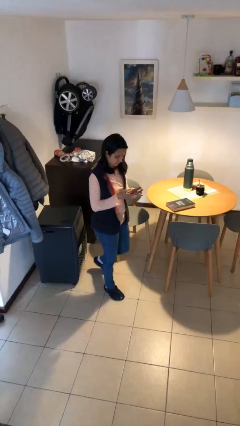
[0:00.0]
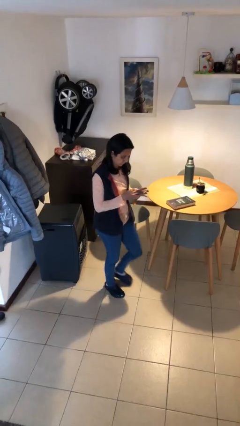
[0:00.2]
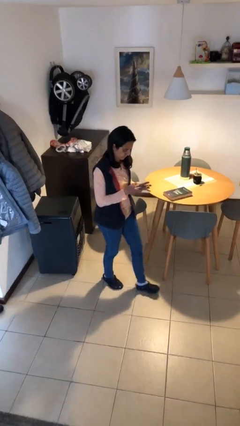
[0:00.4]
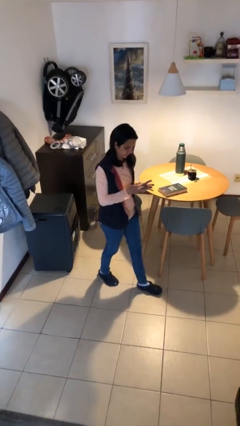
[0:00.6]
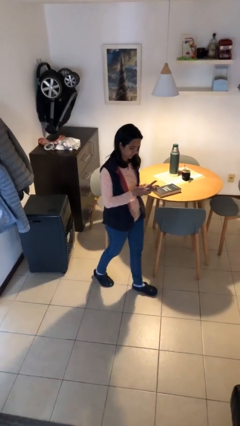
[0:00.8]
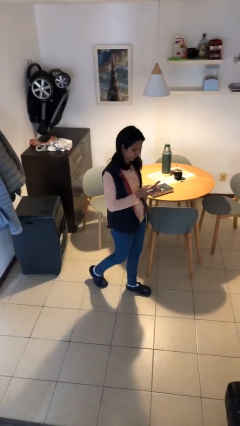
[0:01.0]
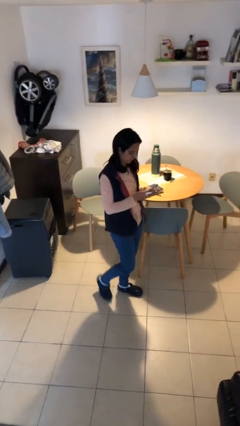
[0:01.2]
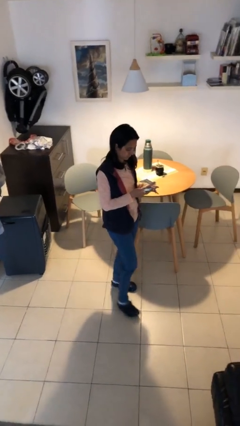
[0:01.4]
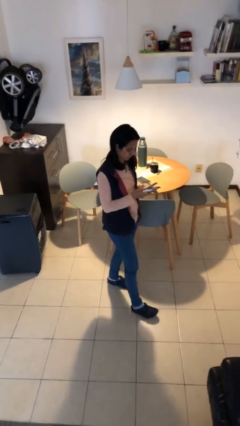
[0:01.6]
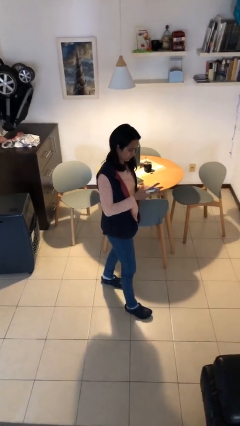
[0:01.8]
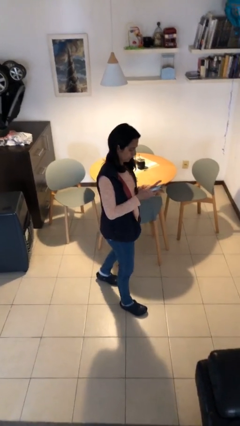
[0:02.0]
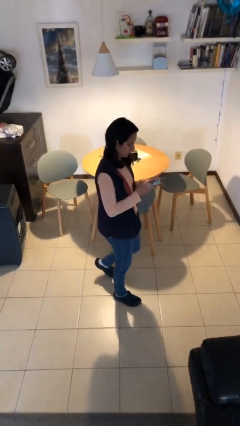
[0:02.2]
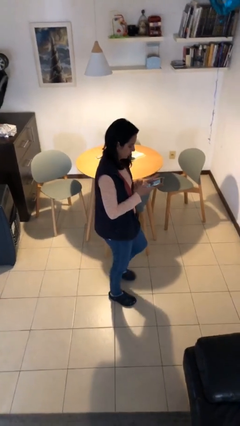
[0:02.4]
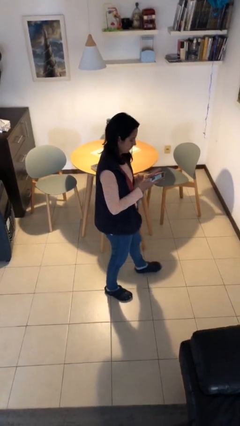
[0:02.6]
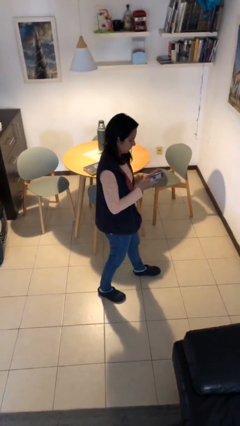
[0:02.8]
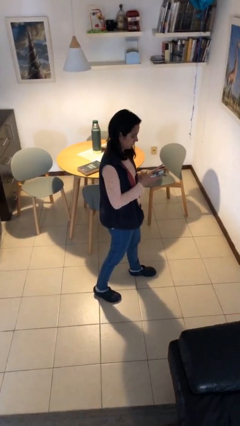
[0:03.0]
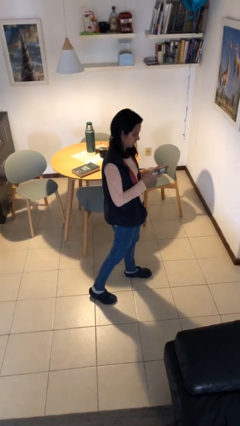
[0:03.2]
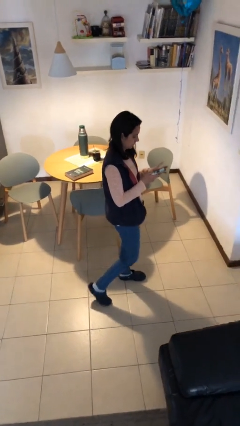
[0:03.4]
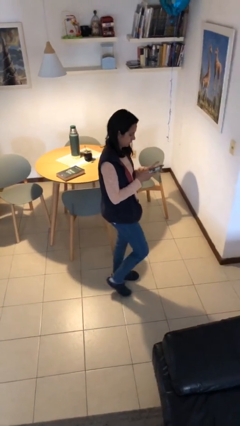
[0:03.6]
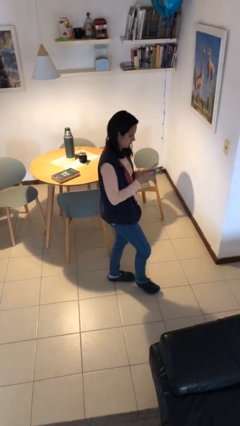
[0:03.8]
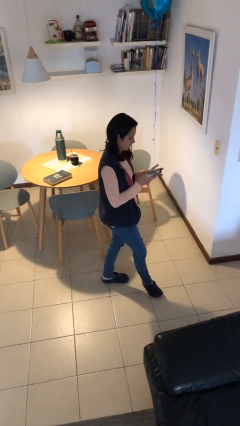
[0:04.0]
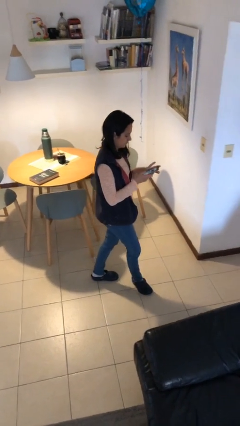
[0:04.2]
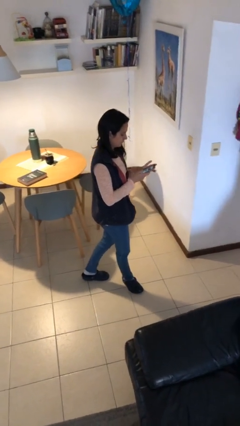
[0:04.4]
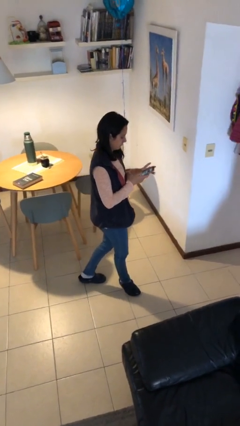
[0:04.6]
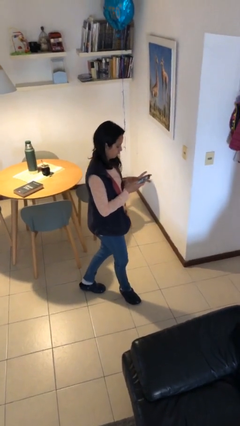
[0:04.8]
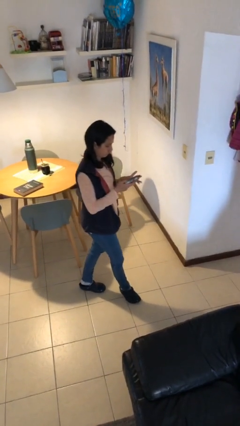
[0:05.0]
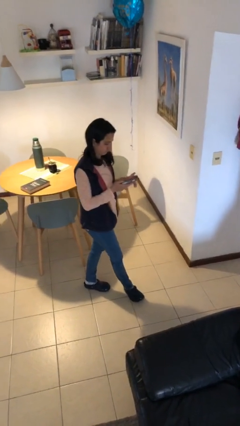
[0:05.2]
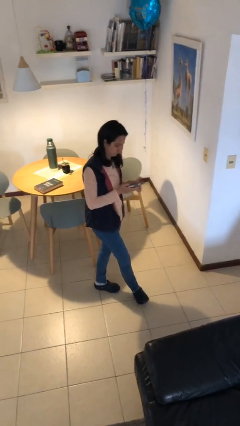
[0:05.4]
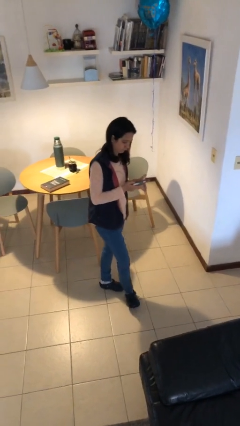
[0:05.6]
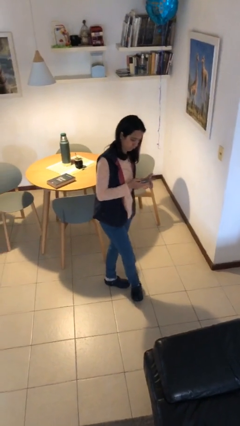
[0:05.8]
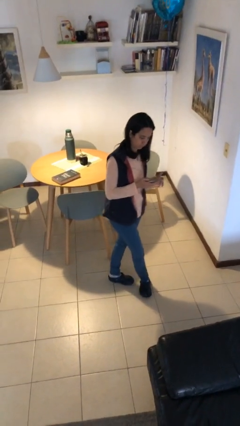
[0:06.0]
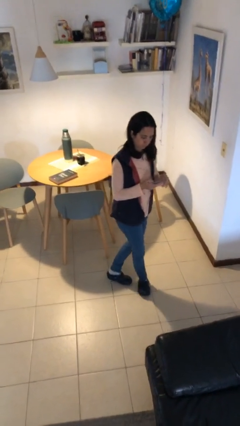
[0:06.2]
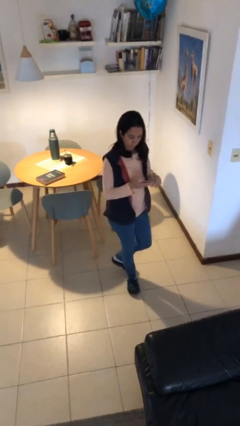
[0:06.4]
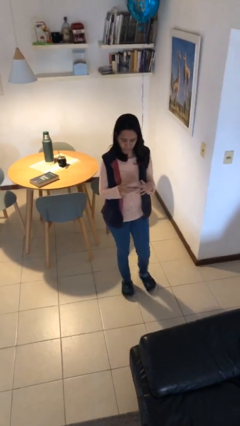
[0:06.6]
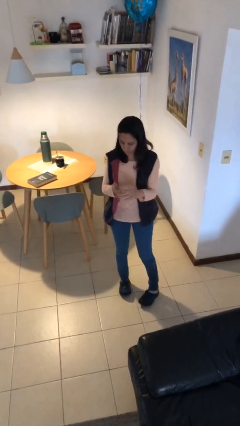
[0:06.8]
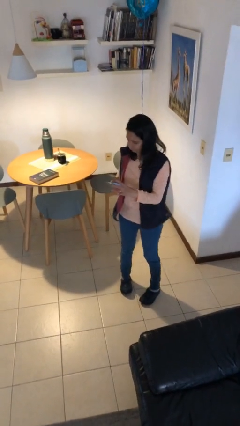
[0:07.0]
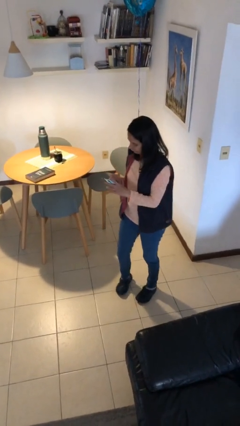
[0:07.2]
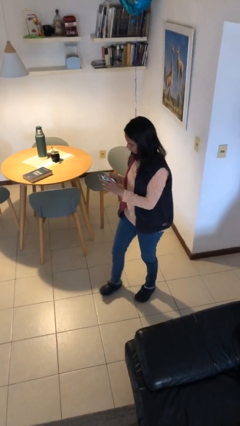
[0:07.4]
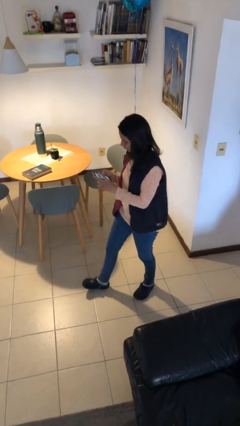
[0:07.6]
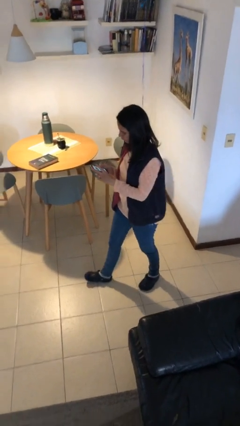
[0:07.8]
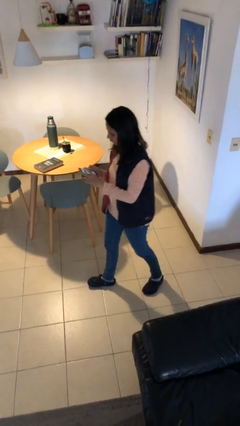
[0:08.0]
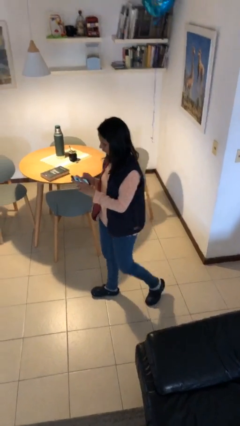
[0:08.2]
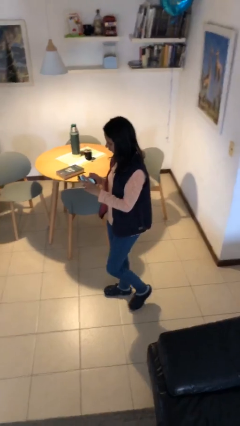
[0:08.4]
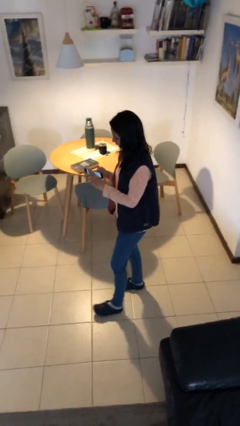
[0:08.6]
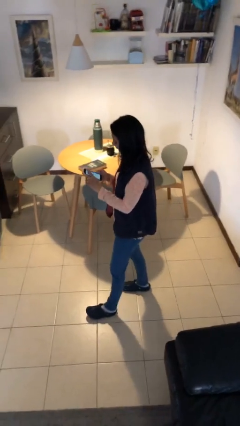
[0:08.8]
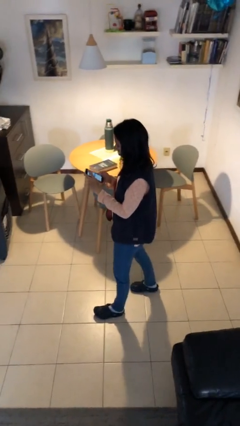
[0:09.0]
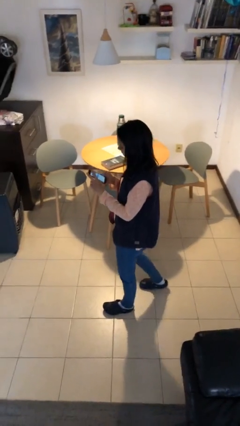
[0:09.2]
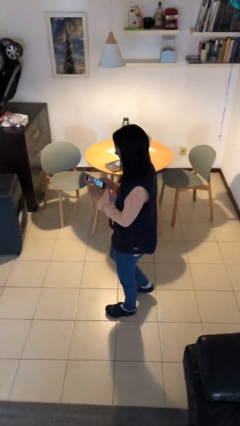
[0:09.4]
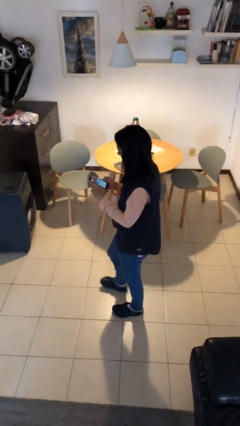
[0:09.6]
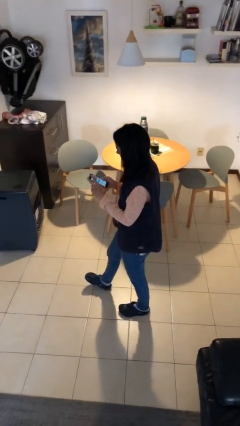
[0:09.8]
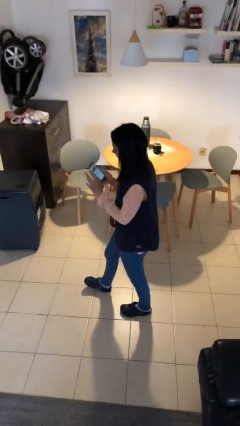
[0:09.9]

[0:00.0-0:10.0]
person texts on phone

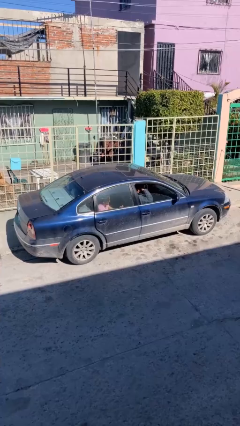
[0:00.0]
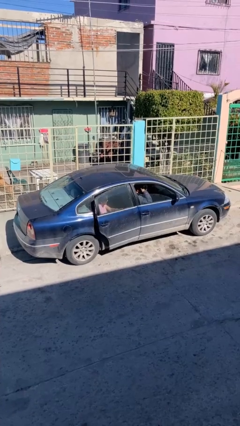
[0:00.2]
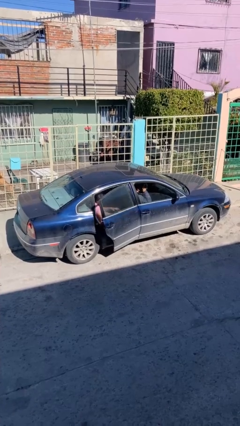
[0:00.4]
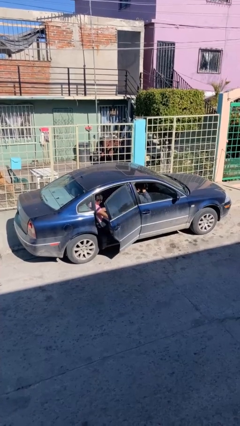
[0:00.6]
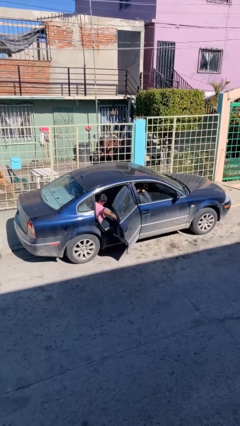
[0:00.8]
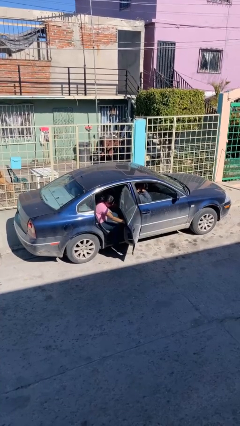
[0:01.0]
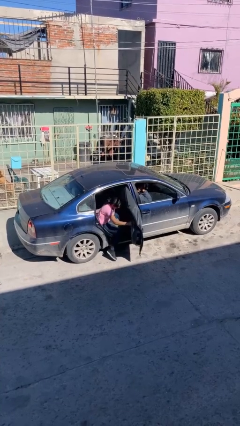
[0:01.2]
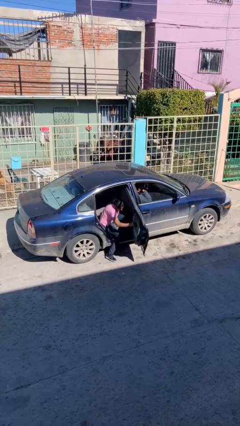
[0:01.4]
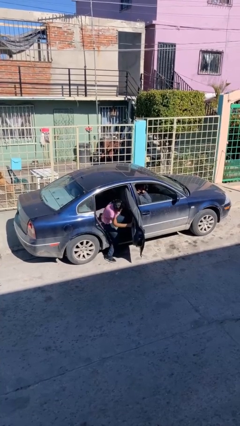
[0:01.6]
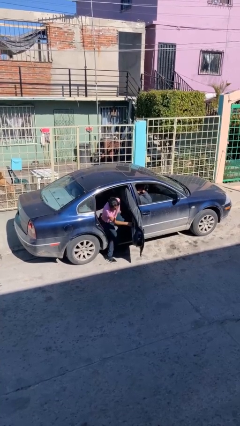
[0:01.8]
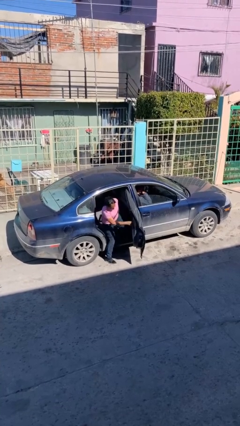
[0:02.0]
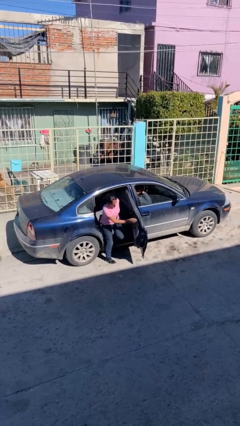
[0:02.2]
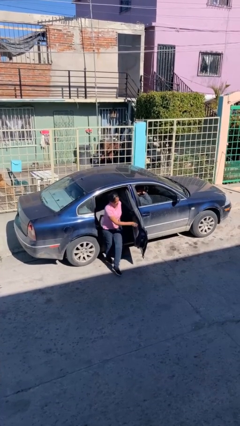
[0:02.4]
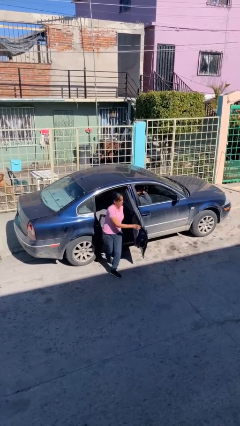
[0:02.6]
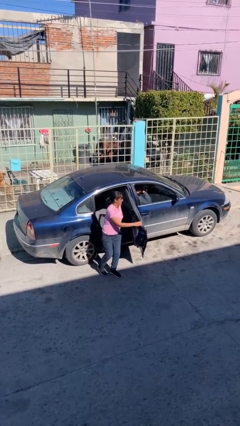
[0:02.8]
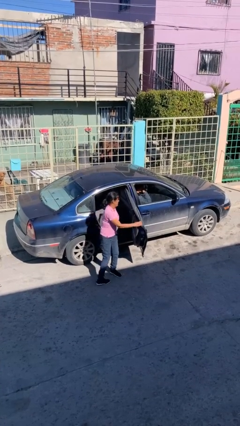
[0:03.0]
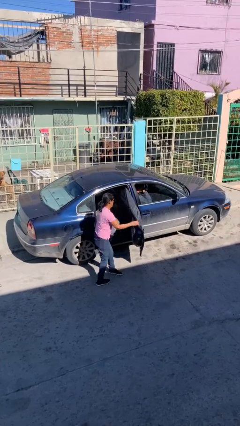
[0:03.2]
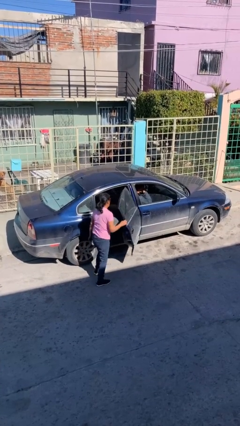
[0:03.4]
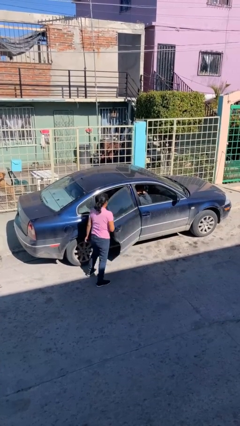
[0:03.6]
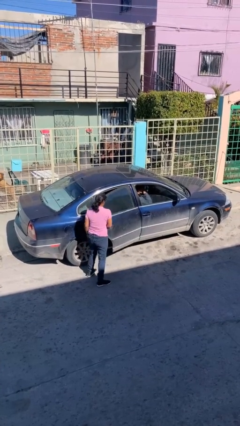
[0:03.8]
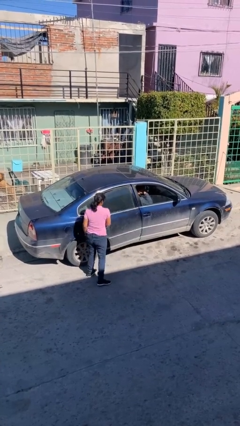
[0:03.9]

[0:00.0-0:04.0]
car drops off person

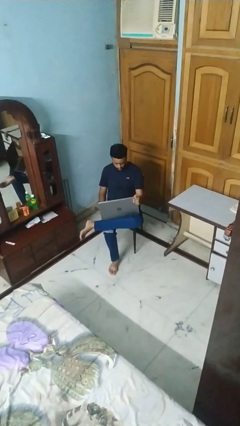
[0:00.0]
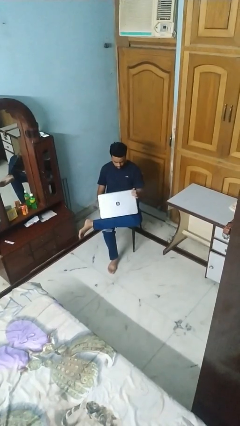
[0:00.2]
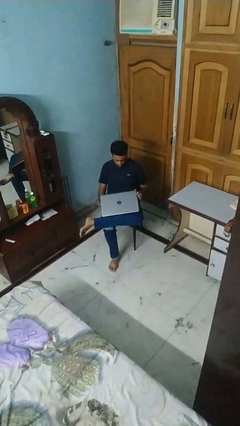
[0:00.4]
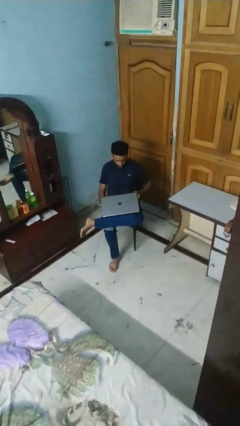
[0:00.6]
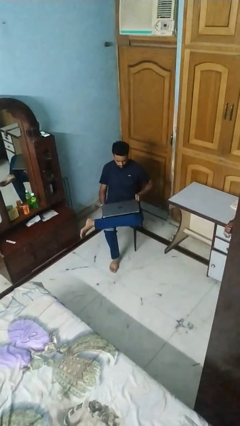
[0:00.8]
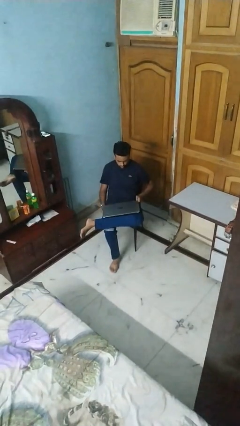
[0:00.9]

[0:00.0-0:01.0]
person closes laptop

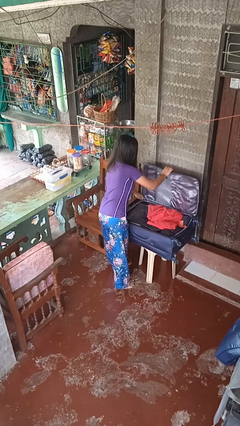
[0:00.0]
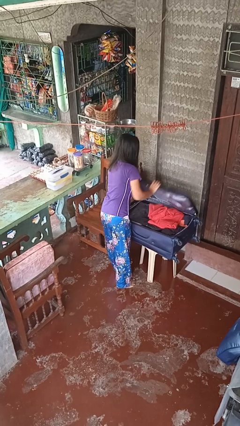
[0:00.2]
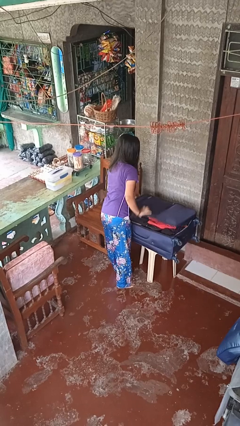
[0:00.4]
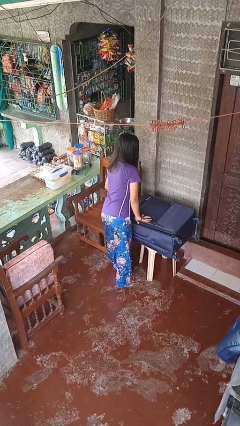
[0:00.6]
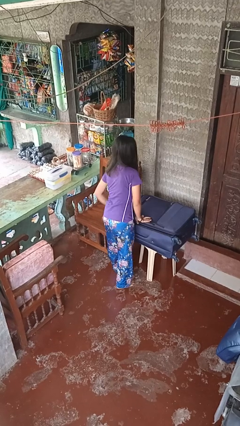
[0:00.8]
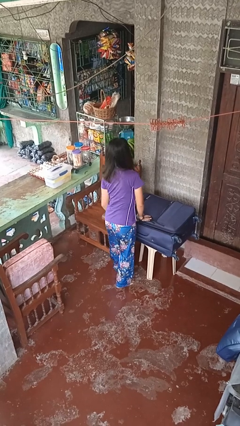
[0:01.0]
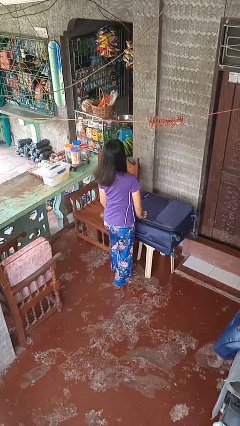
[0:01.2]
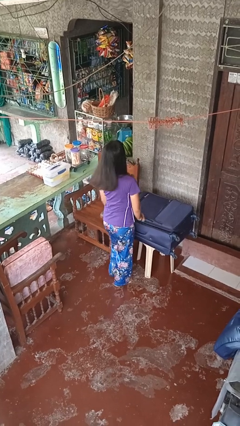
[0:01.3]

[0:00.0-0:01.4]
person closes suitcase

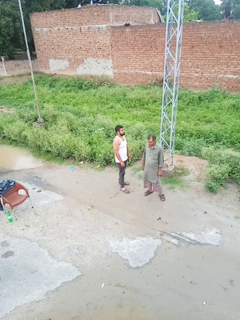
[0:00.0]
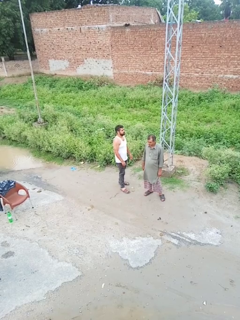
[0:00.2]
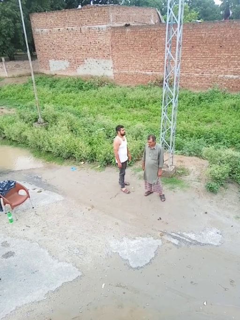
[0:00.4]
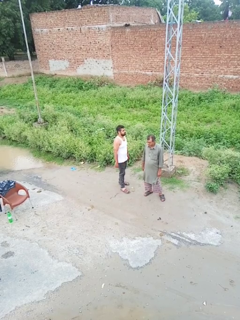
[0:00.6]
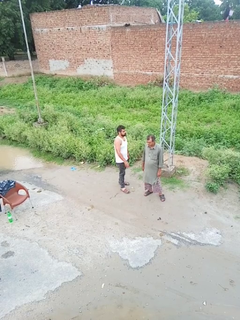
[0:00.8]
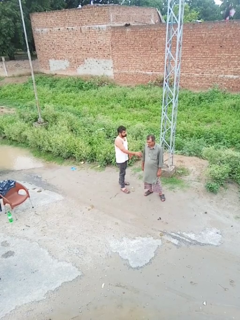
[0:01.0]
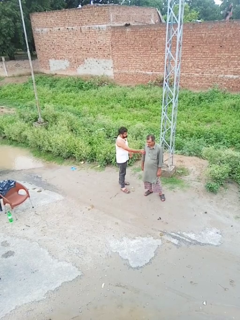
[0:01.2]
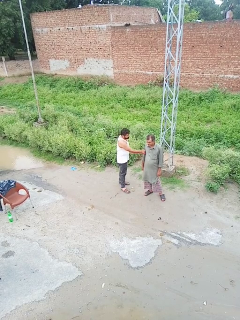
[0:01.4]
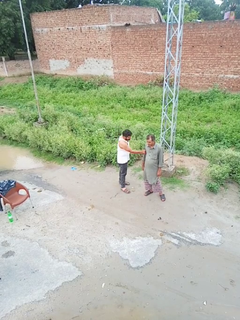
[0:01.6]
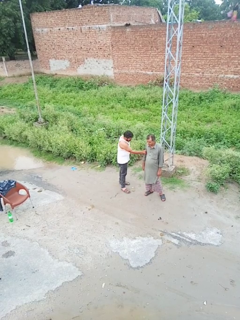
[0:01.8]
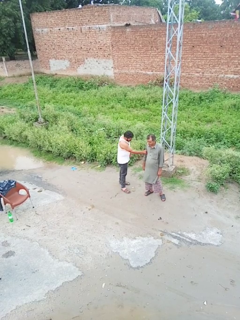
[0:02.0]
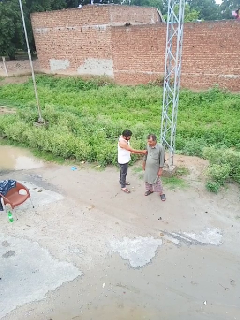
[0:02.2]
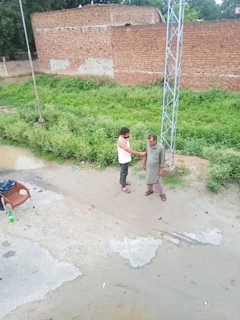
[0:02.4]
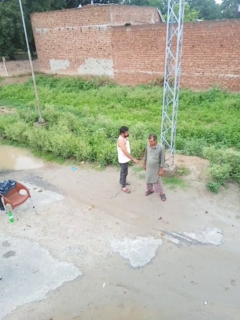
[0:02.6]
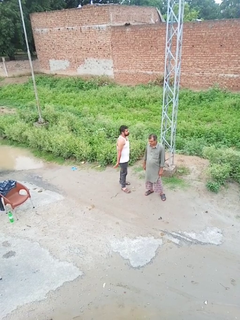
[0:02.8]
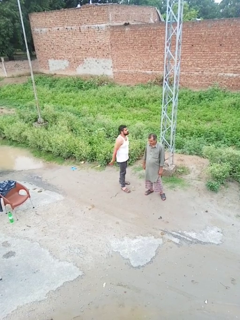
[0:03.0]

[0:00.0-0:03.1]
person grabs person by bicep
